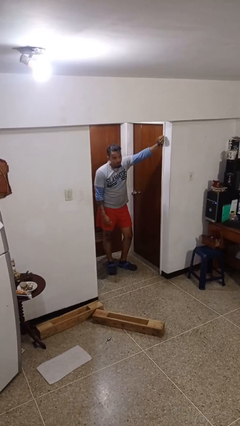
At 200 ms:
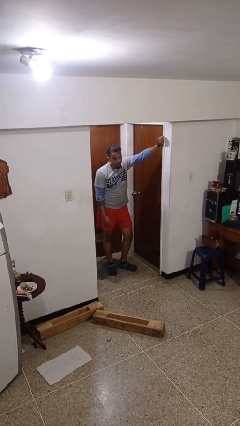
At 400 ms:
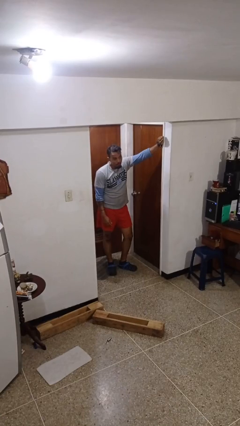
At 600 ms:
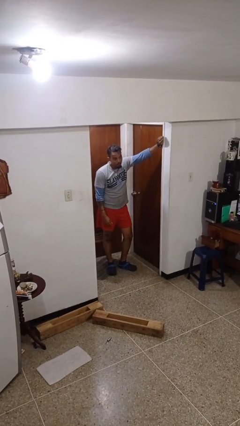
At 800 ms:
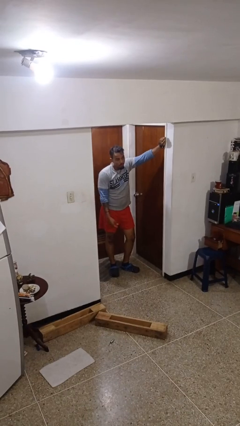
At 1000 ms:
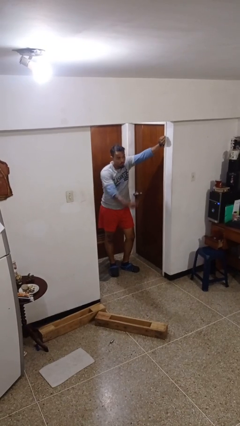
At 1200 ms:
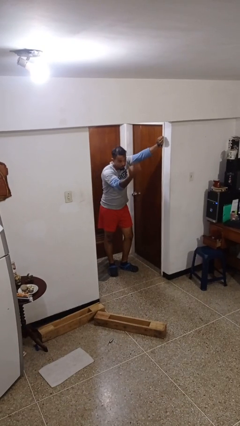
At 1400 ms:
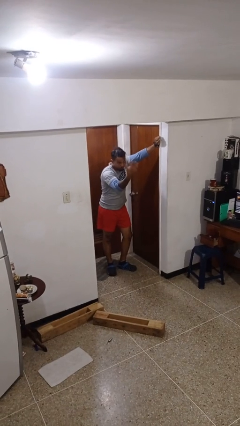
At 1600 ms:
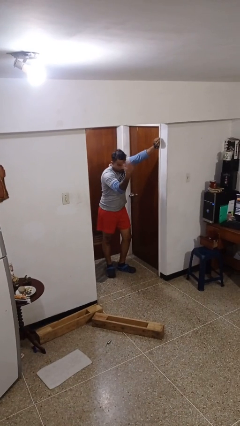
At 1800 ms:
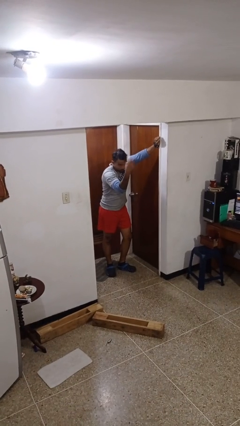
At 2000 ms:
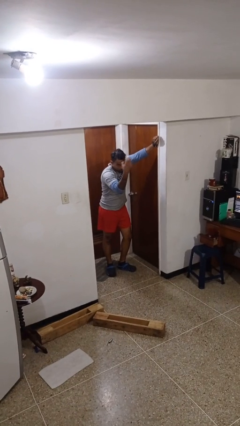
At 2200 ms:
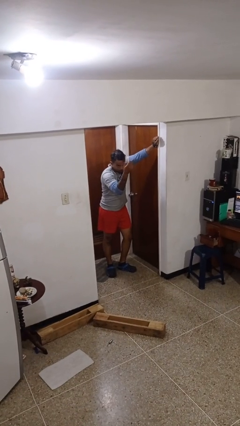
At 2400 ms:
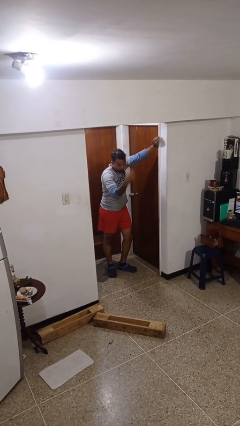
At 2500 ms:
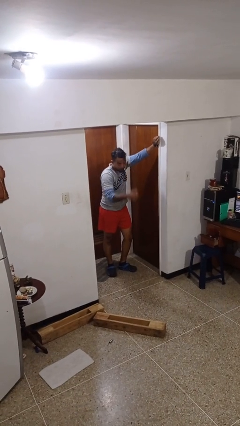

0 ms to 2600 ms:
person gestures come here

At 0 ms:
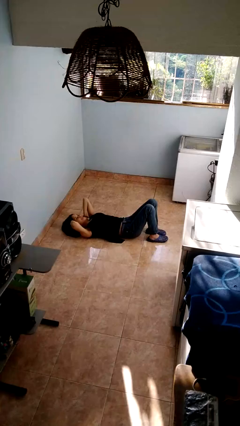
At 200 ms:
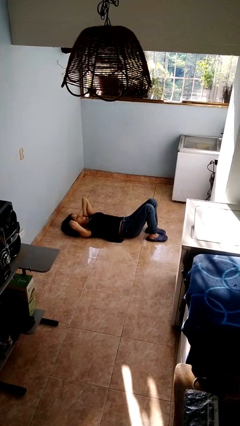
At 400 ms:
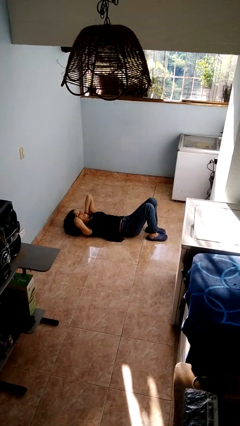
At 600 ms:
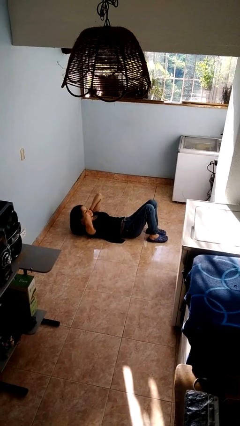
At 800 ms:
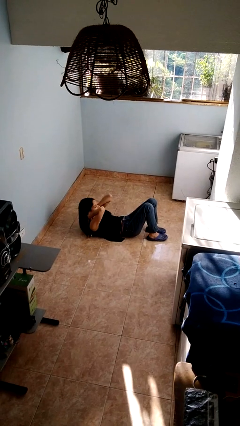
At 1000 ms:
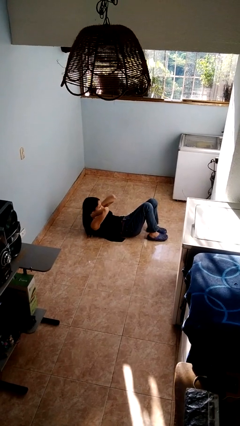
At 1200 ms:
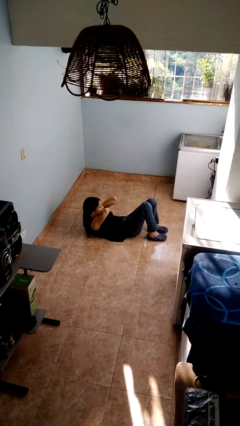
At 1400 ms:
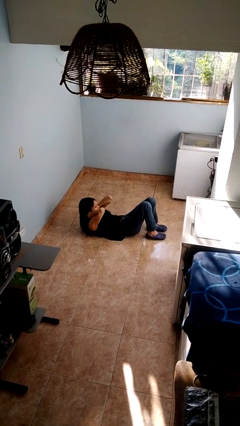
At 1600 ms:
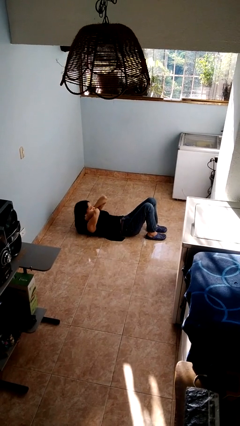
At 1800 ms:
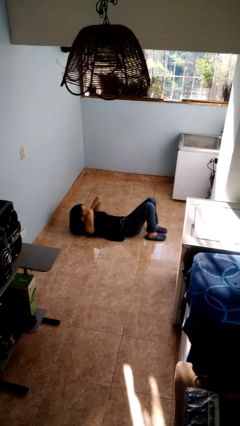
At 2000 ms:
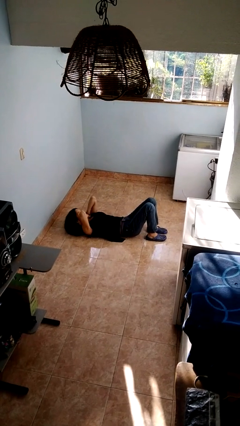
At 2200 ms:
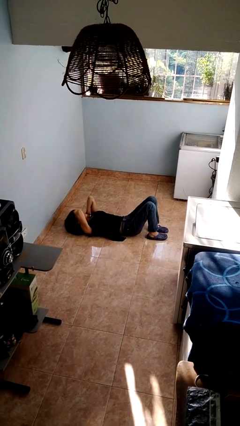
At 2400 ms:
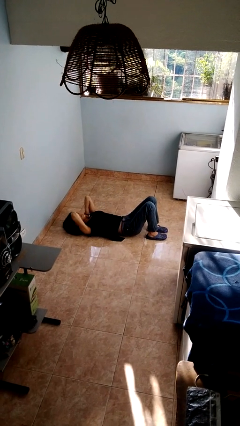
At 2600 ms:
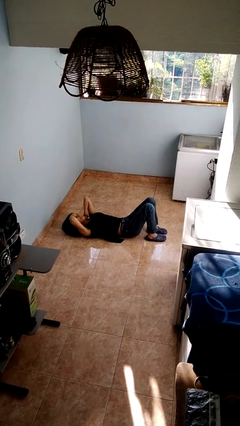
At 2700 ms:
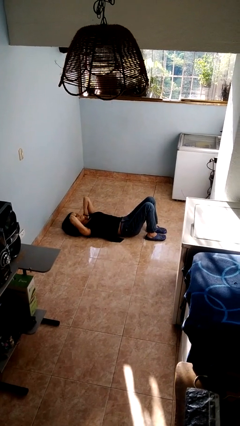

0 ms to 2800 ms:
person exercises with situp

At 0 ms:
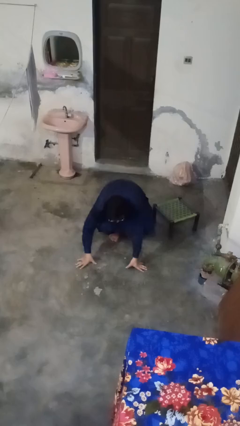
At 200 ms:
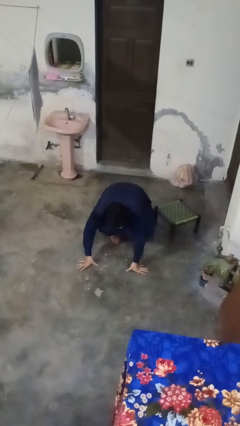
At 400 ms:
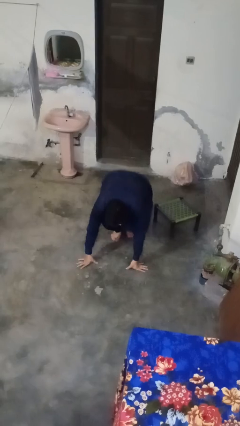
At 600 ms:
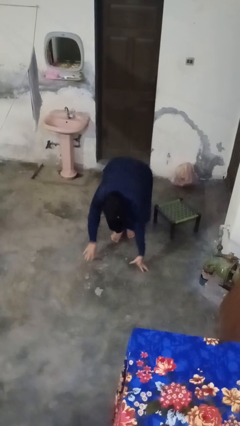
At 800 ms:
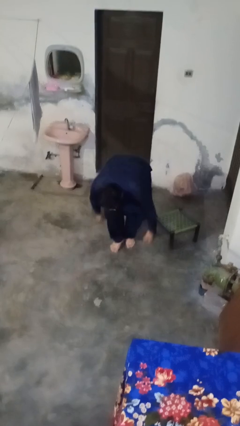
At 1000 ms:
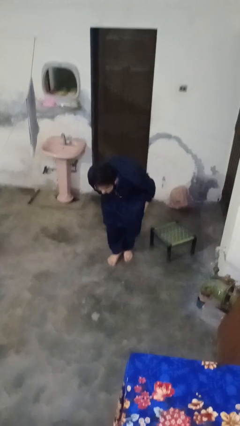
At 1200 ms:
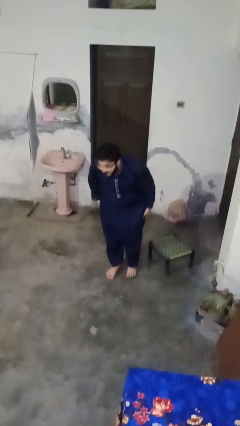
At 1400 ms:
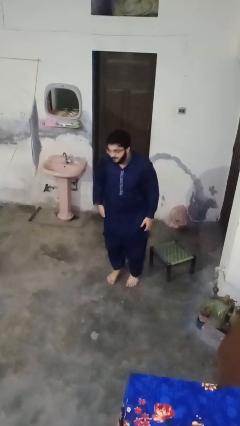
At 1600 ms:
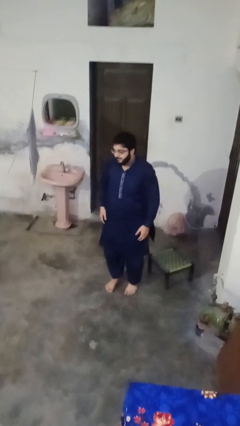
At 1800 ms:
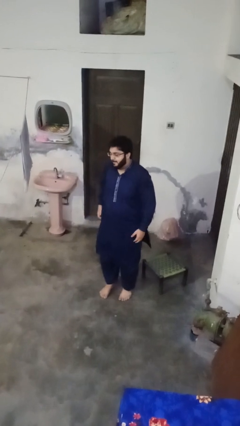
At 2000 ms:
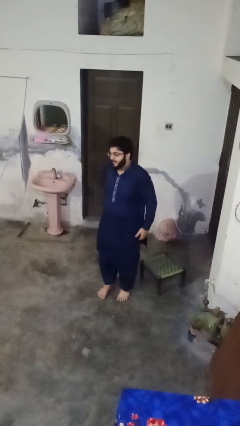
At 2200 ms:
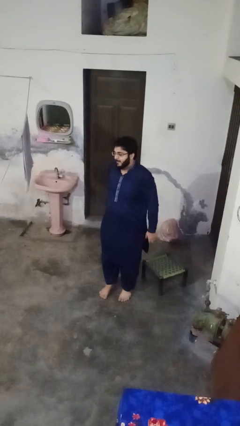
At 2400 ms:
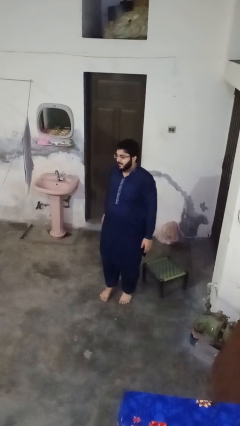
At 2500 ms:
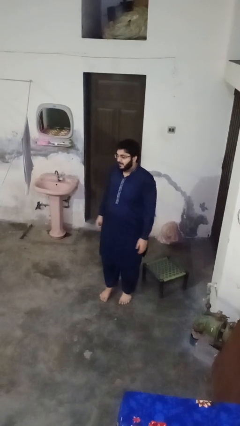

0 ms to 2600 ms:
person stands up from floor

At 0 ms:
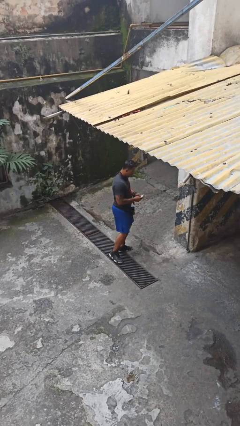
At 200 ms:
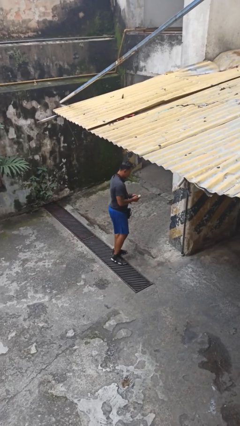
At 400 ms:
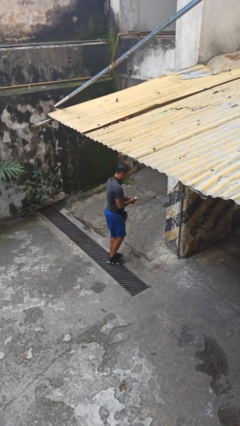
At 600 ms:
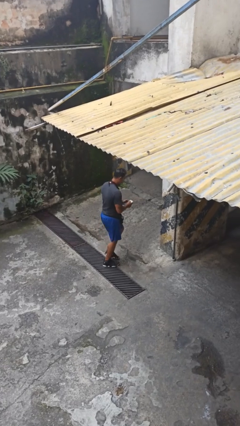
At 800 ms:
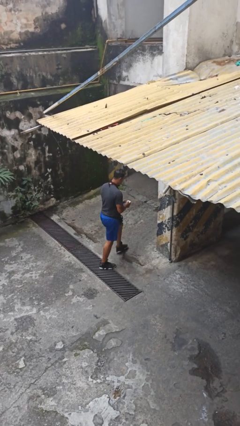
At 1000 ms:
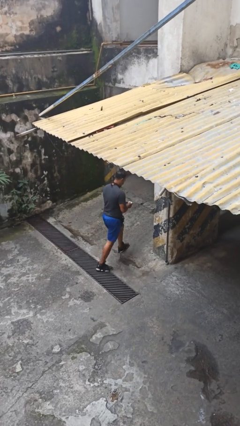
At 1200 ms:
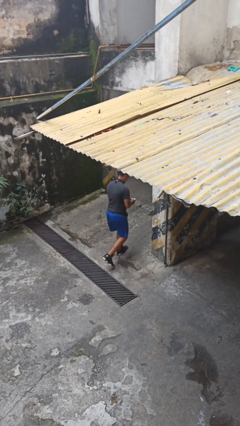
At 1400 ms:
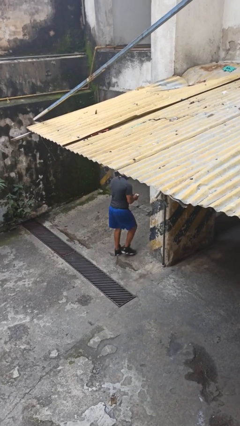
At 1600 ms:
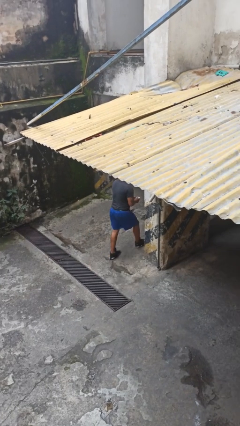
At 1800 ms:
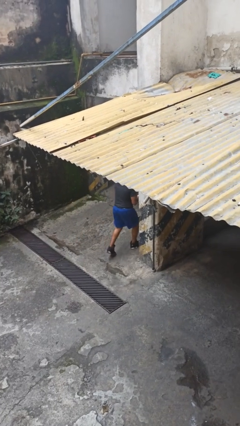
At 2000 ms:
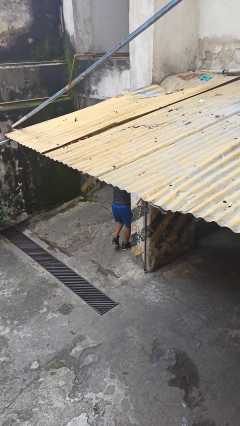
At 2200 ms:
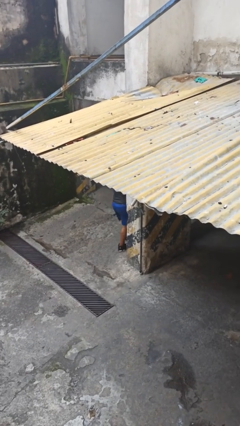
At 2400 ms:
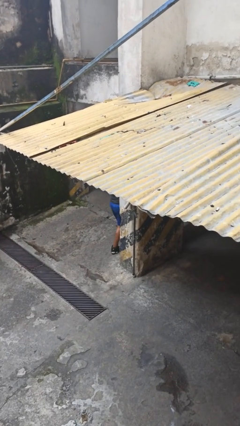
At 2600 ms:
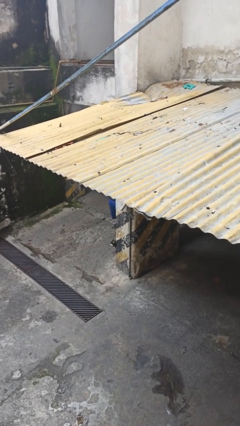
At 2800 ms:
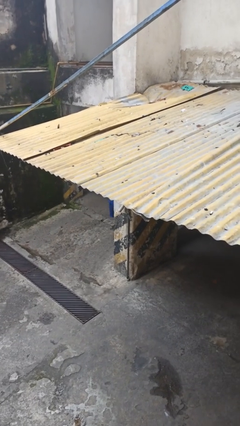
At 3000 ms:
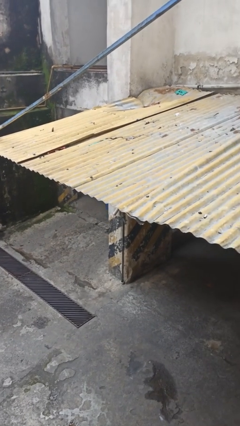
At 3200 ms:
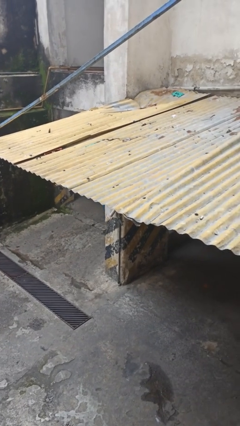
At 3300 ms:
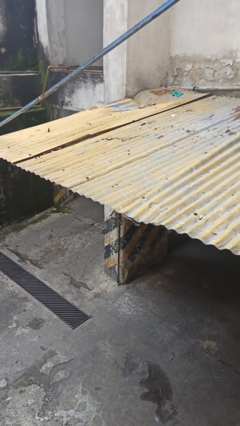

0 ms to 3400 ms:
person exits scene through structure

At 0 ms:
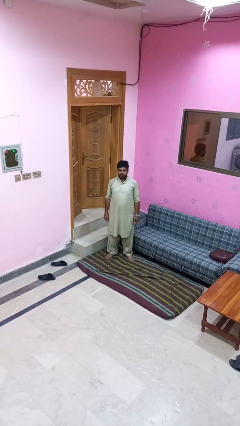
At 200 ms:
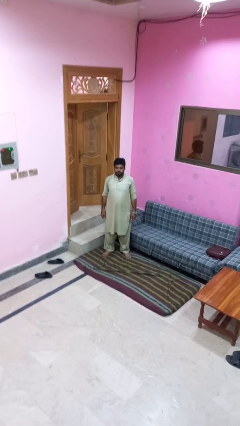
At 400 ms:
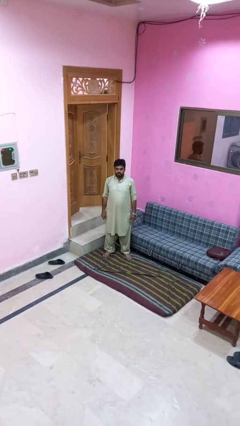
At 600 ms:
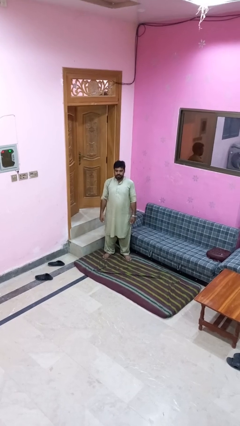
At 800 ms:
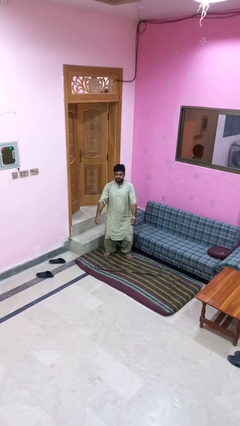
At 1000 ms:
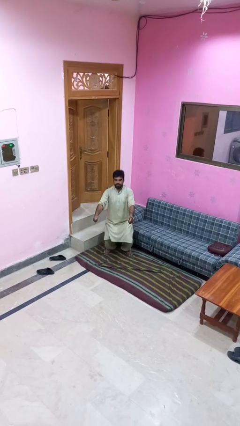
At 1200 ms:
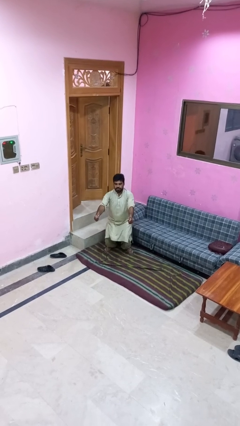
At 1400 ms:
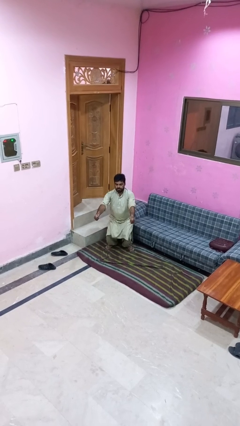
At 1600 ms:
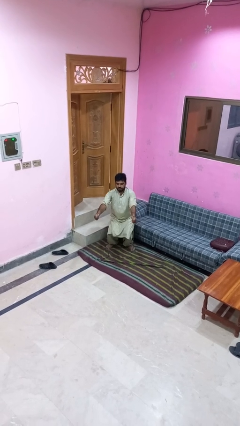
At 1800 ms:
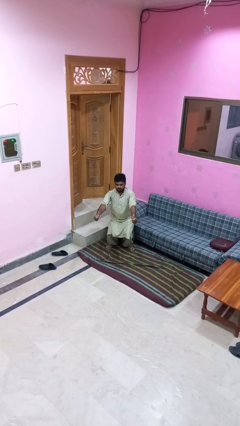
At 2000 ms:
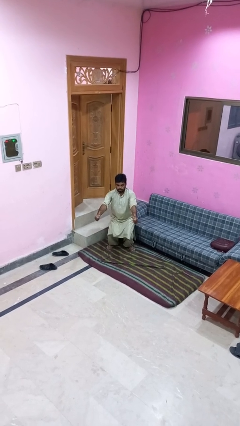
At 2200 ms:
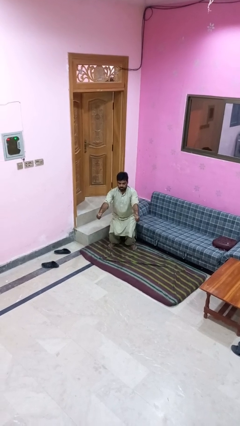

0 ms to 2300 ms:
person squats

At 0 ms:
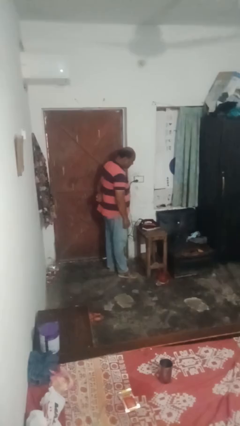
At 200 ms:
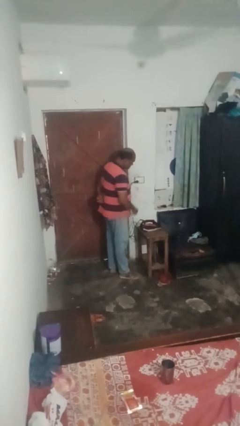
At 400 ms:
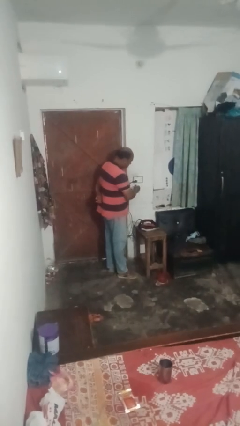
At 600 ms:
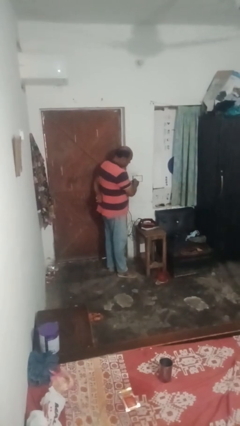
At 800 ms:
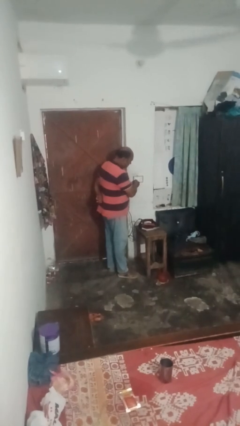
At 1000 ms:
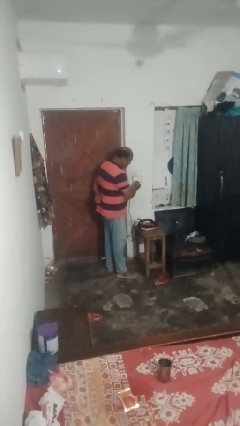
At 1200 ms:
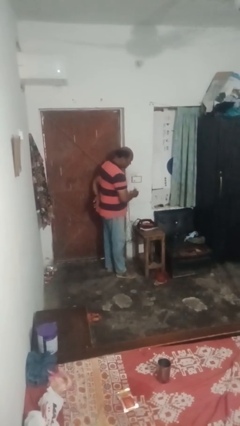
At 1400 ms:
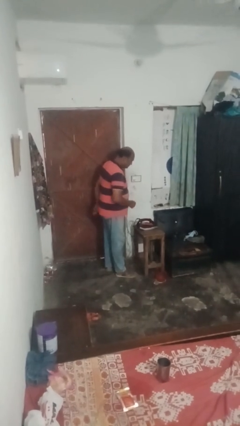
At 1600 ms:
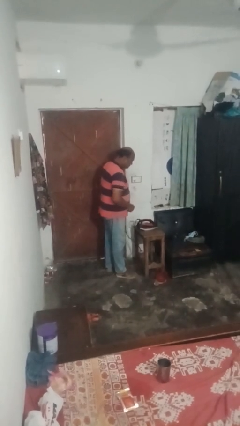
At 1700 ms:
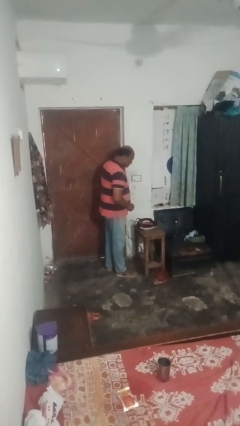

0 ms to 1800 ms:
person unplugs from electrical socket

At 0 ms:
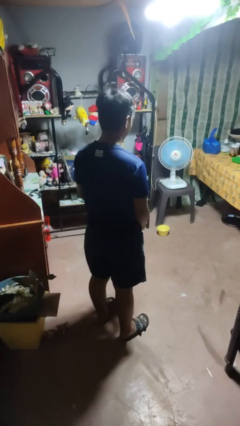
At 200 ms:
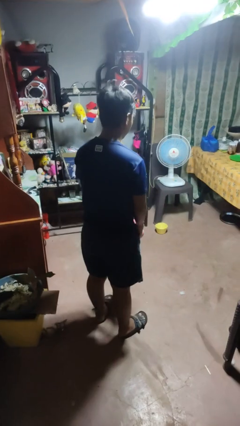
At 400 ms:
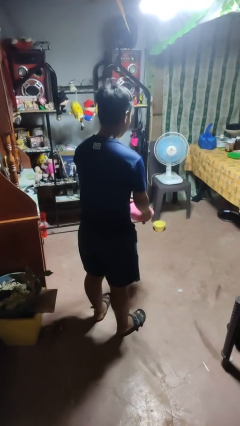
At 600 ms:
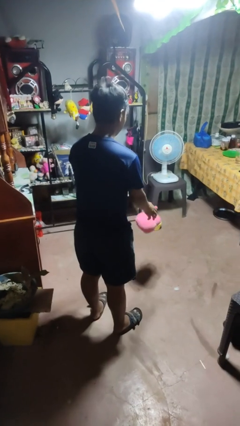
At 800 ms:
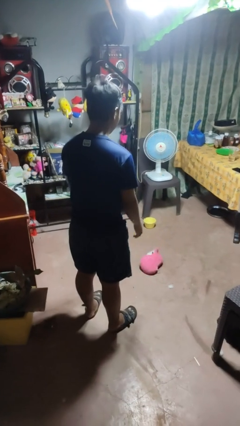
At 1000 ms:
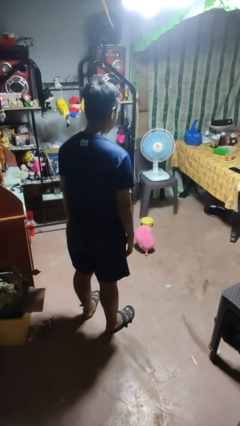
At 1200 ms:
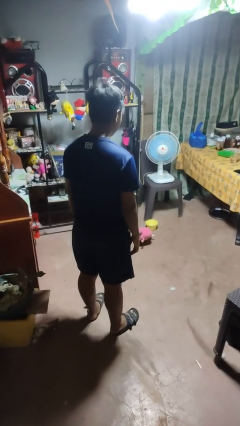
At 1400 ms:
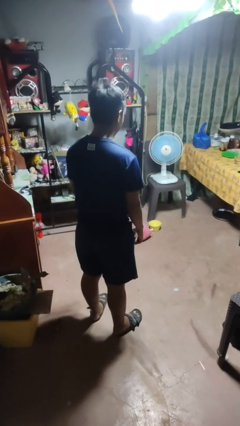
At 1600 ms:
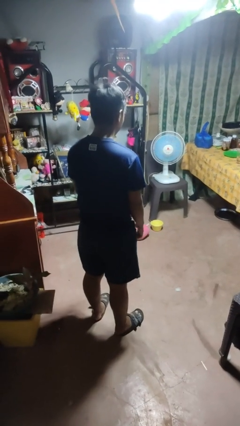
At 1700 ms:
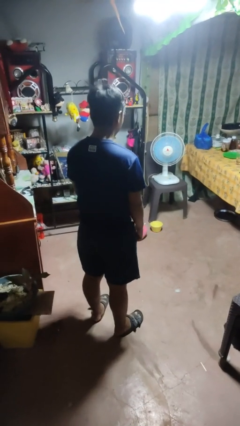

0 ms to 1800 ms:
person throws object into air
